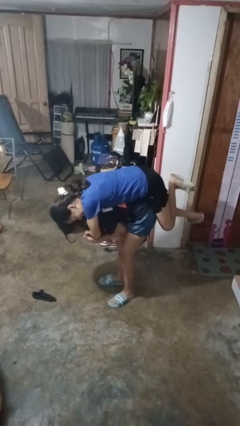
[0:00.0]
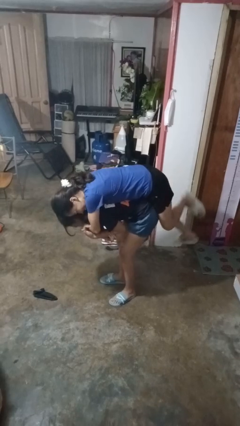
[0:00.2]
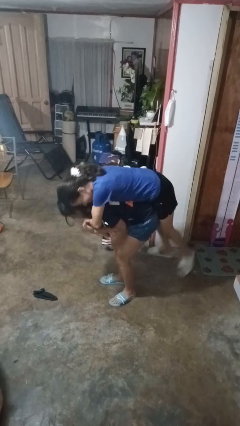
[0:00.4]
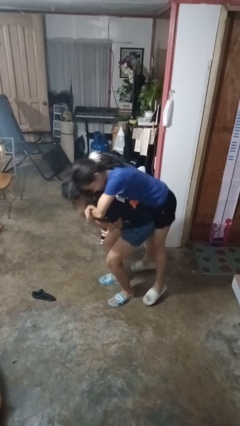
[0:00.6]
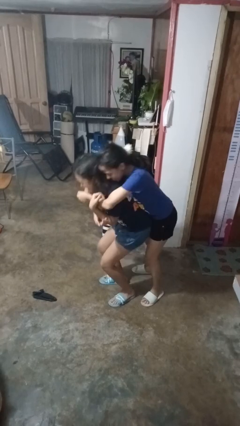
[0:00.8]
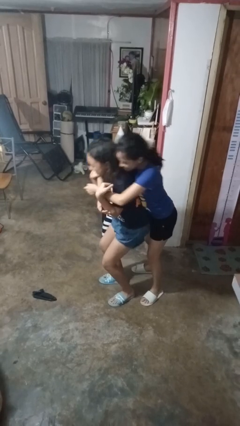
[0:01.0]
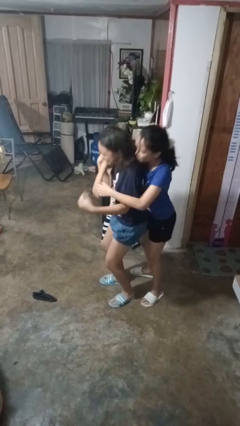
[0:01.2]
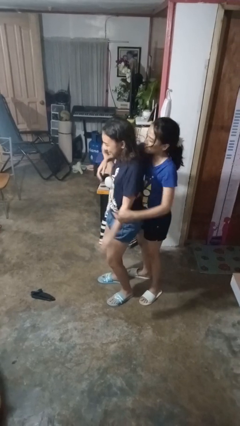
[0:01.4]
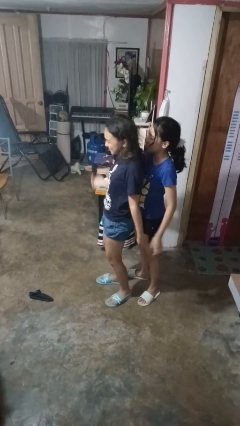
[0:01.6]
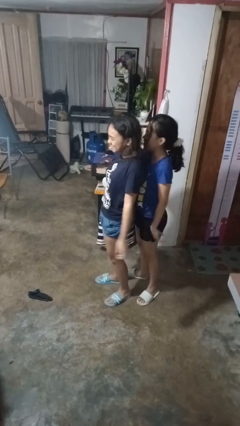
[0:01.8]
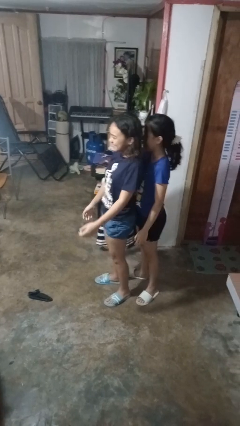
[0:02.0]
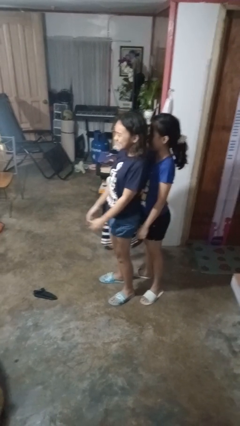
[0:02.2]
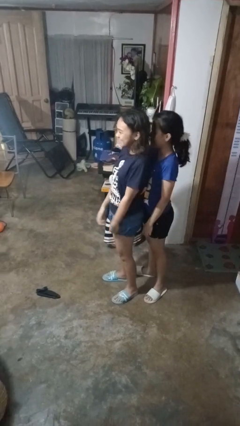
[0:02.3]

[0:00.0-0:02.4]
person puts down person

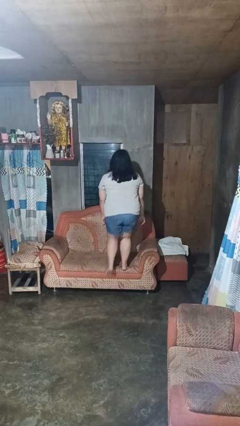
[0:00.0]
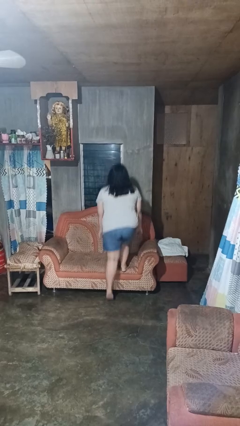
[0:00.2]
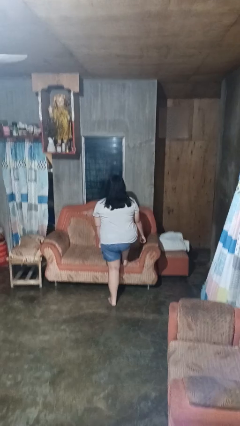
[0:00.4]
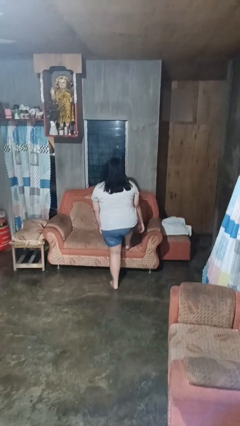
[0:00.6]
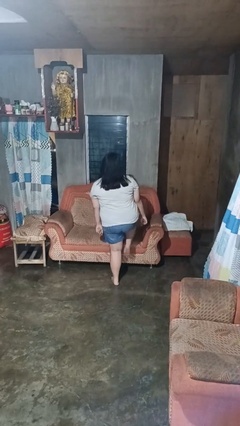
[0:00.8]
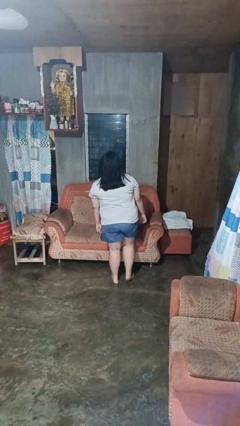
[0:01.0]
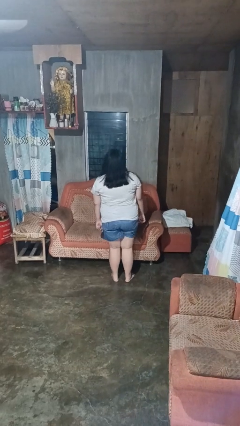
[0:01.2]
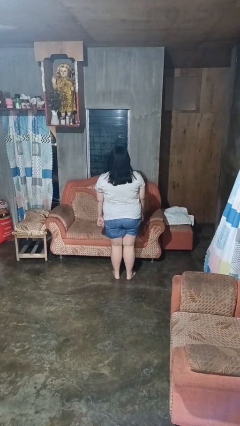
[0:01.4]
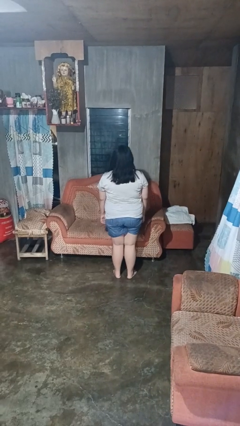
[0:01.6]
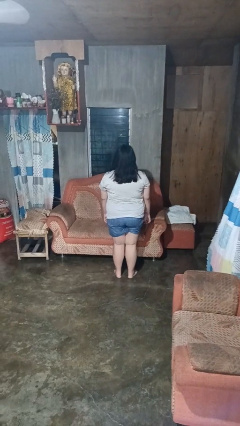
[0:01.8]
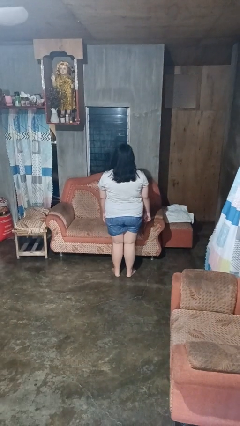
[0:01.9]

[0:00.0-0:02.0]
person climbs off couch

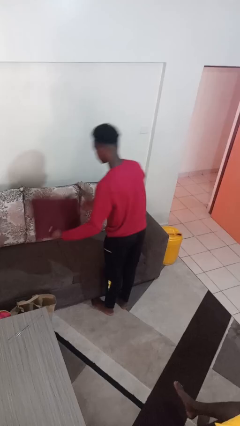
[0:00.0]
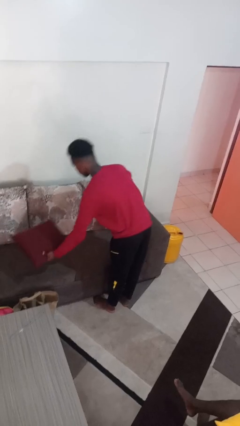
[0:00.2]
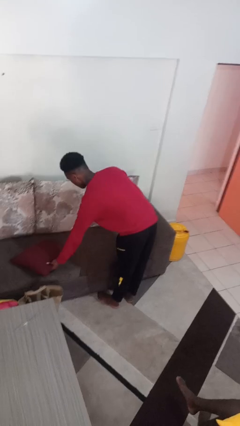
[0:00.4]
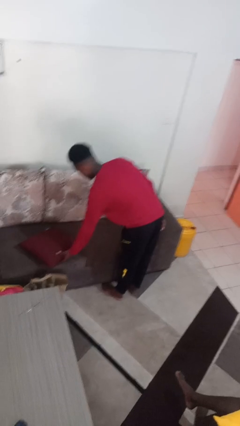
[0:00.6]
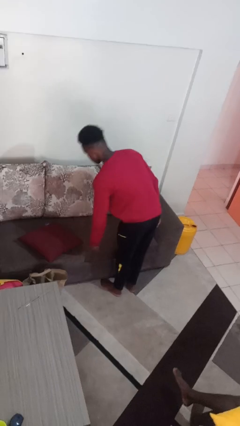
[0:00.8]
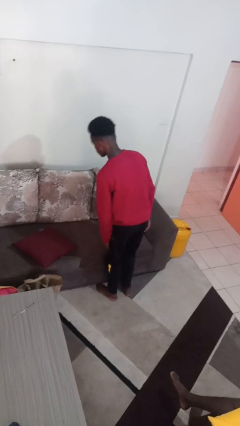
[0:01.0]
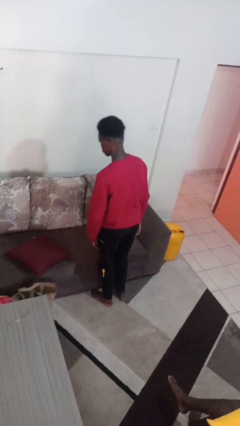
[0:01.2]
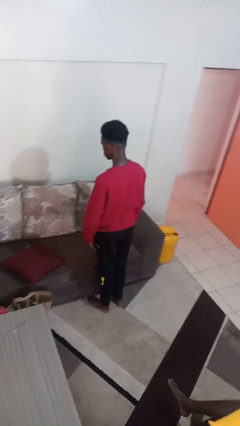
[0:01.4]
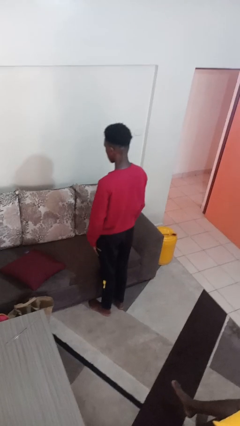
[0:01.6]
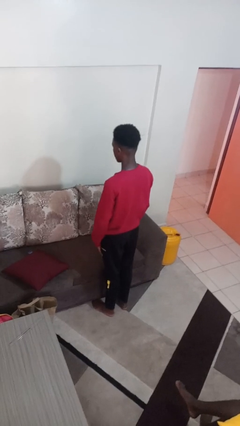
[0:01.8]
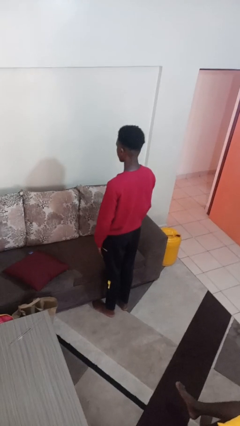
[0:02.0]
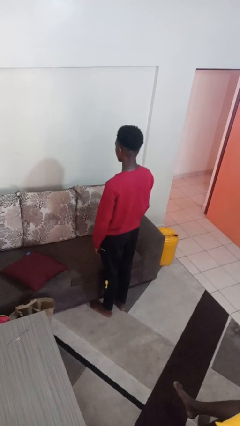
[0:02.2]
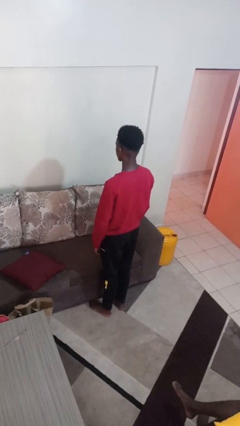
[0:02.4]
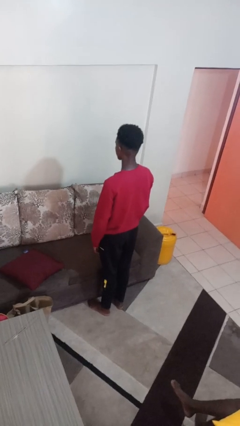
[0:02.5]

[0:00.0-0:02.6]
person puts down object on couch

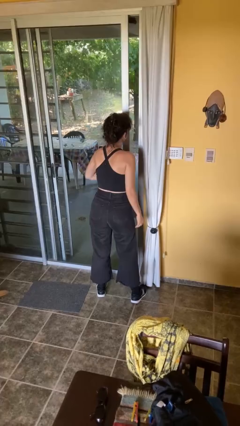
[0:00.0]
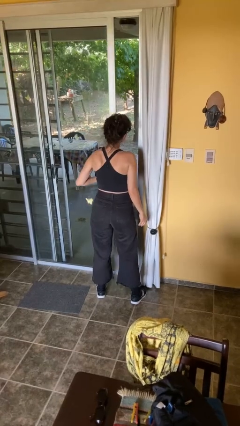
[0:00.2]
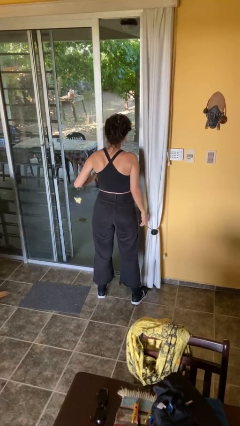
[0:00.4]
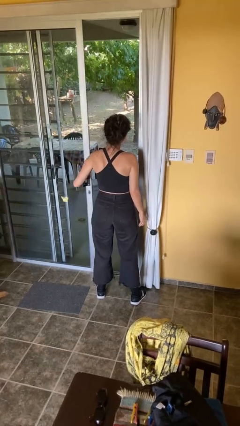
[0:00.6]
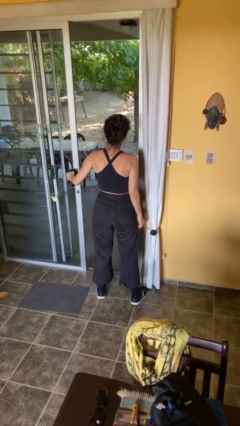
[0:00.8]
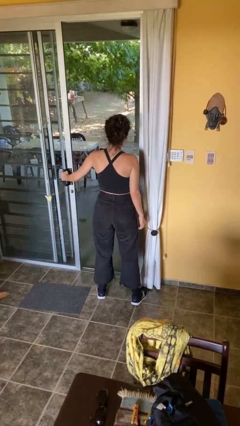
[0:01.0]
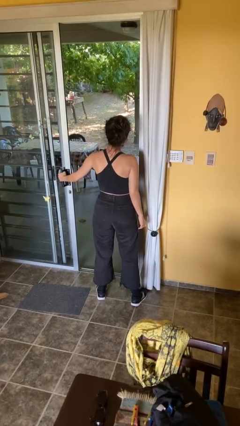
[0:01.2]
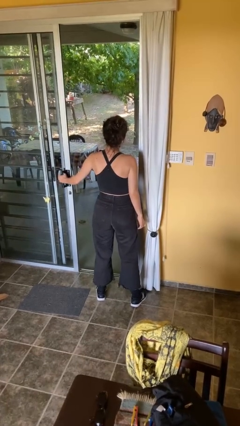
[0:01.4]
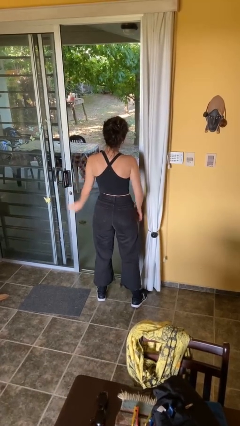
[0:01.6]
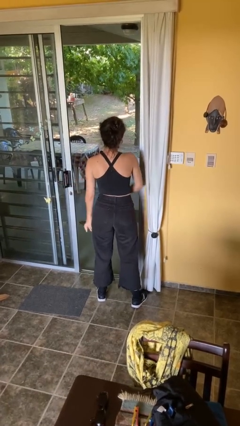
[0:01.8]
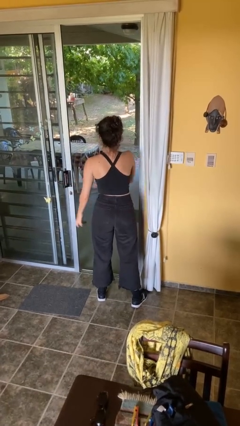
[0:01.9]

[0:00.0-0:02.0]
person opens facility door

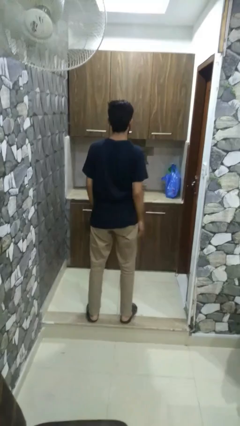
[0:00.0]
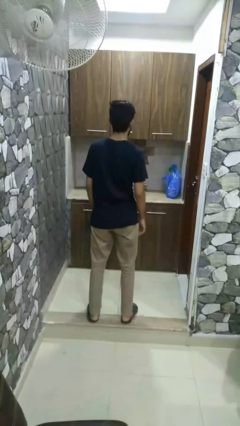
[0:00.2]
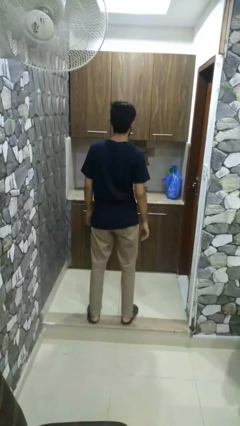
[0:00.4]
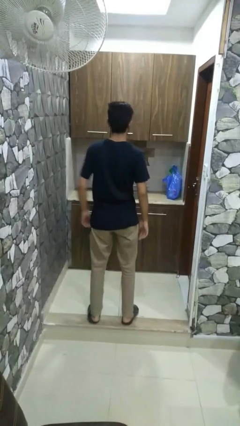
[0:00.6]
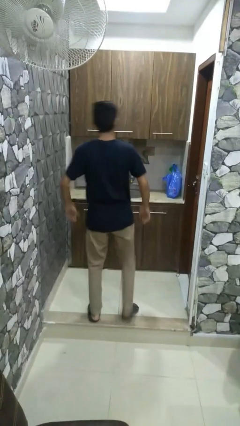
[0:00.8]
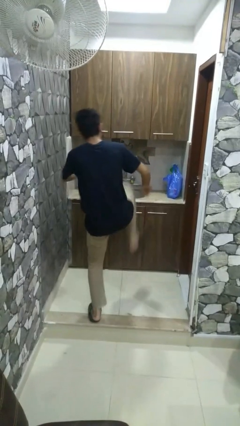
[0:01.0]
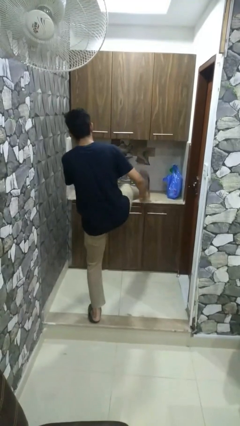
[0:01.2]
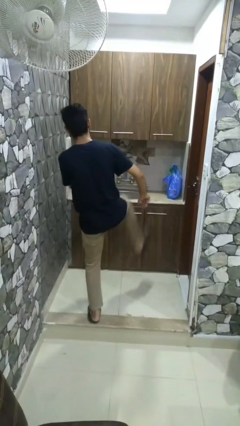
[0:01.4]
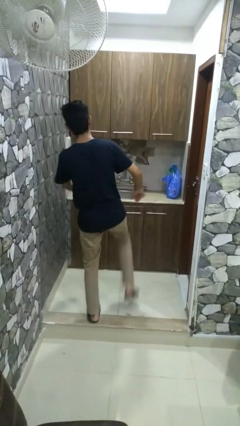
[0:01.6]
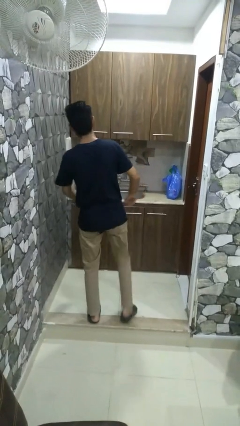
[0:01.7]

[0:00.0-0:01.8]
person karate kicks

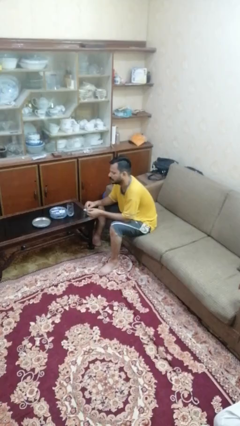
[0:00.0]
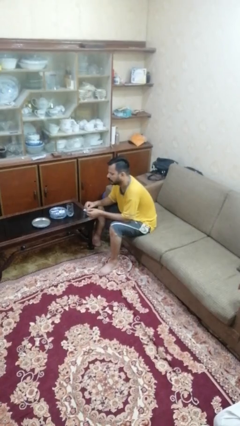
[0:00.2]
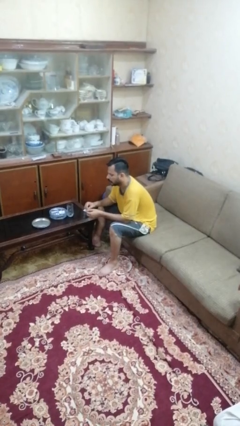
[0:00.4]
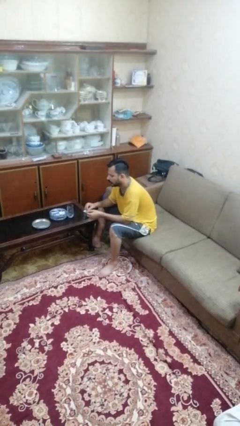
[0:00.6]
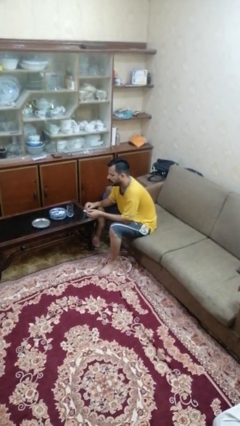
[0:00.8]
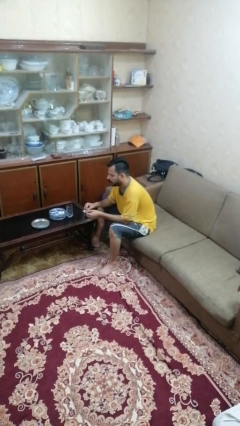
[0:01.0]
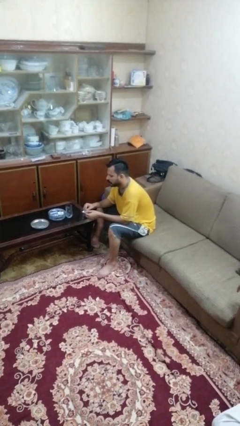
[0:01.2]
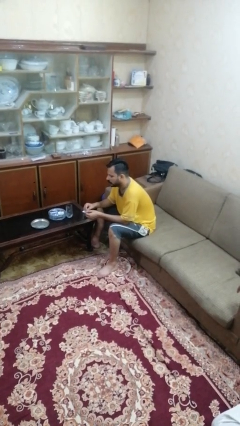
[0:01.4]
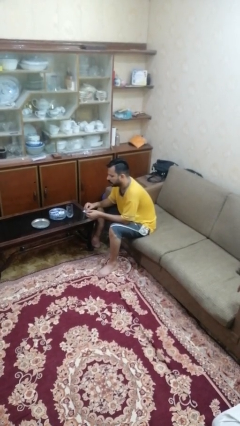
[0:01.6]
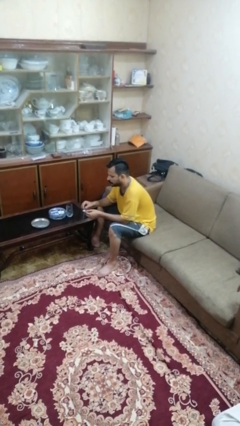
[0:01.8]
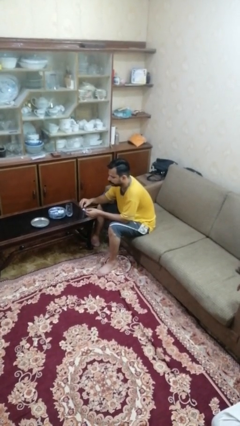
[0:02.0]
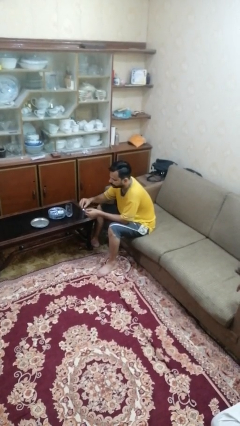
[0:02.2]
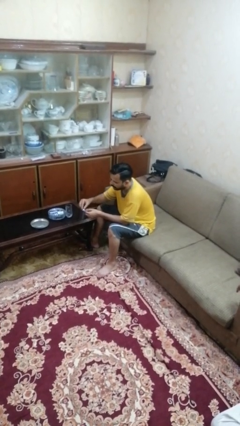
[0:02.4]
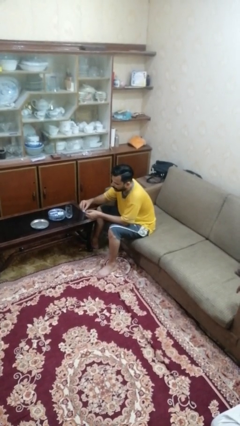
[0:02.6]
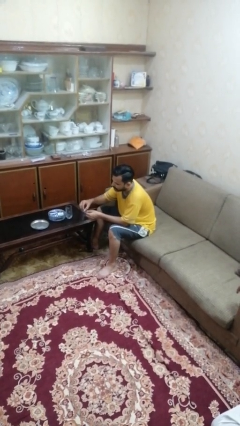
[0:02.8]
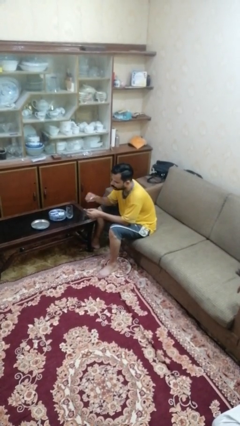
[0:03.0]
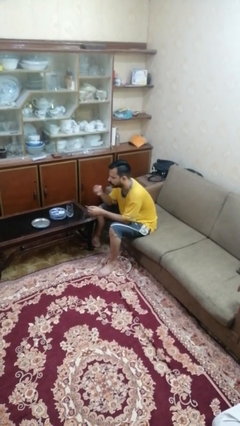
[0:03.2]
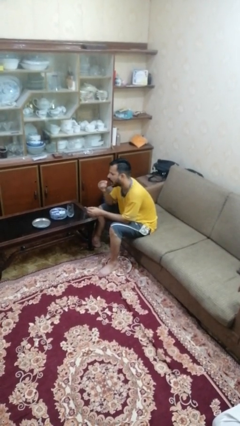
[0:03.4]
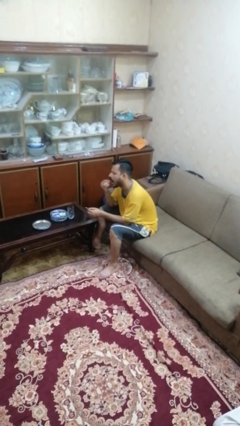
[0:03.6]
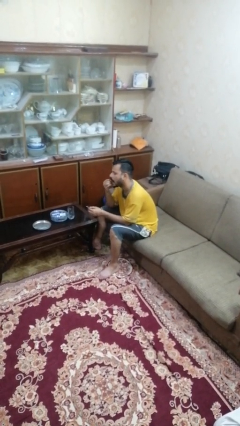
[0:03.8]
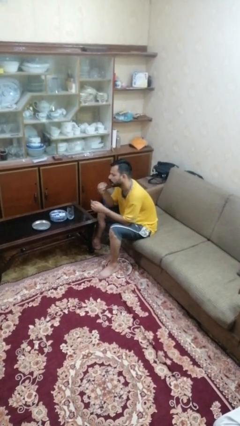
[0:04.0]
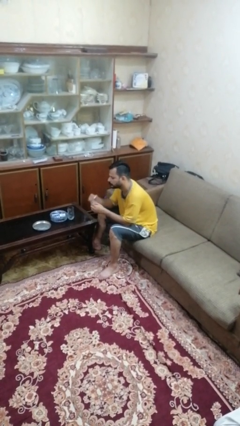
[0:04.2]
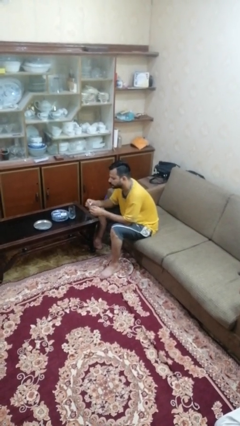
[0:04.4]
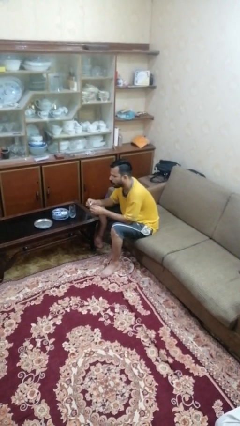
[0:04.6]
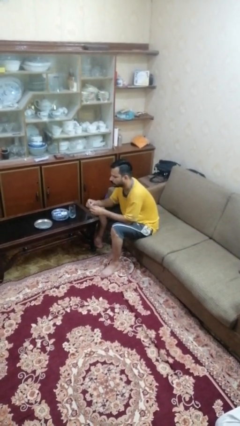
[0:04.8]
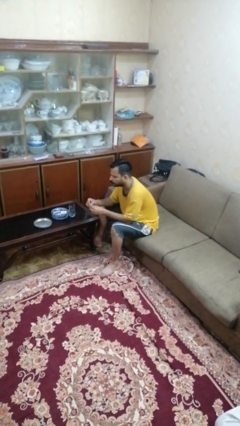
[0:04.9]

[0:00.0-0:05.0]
person takes medicine pills

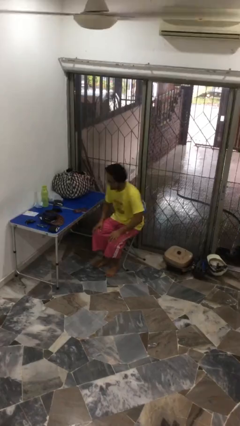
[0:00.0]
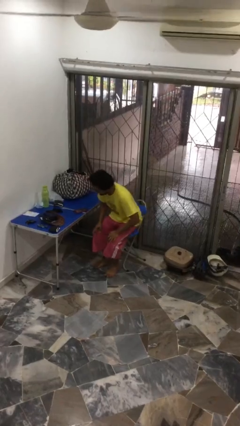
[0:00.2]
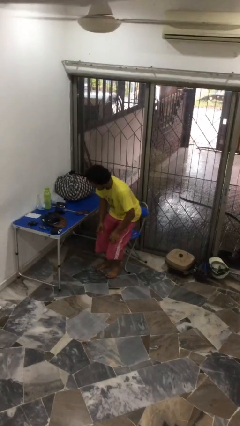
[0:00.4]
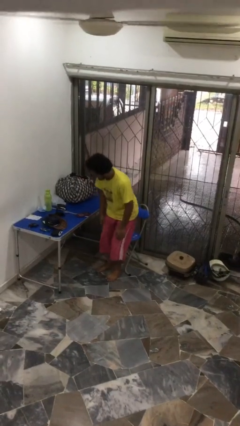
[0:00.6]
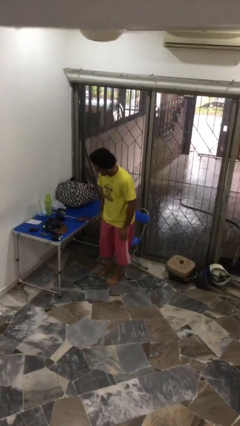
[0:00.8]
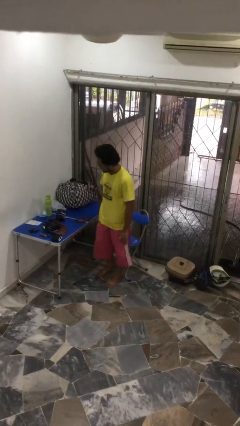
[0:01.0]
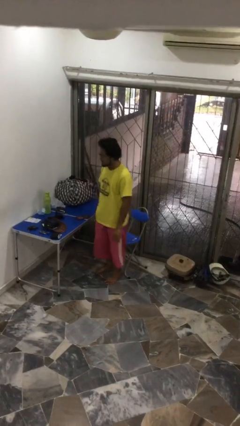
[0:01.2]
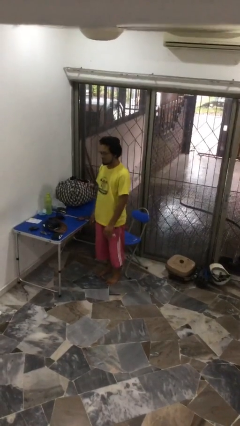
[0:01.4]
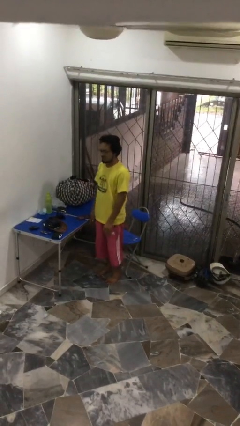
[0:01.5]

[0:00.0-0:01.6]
person stands up
